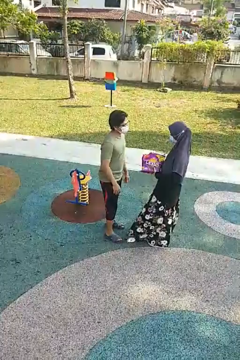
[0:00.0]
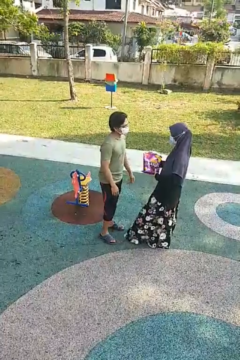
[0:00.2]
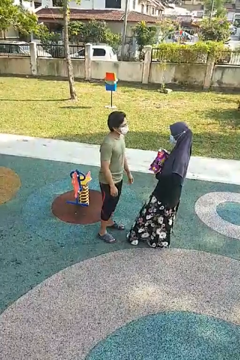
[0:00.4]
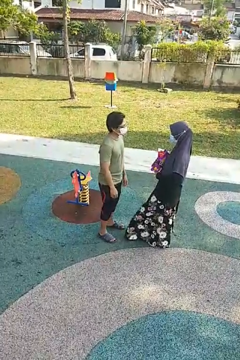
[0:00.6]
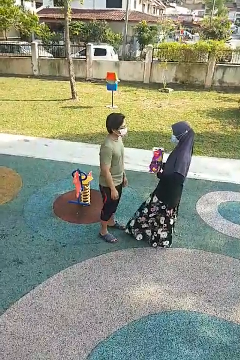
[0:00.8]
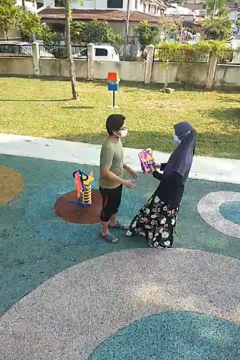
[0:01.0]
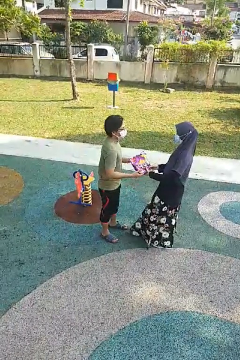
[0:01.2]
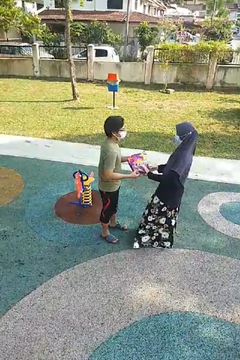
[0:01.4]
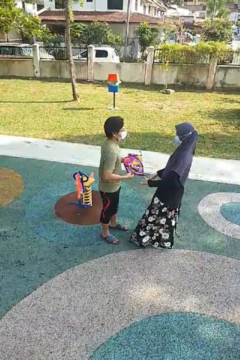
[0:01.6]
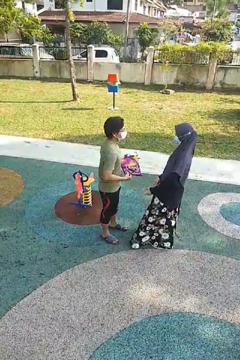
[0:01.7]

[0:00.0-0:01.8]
person transfers object to person

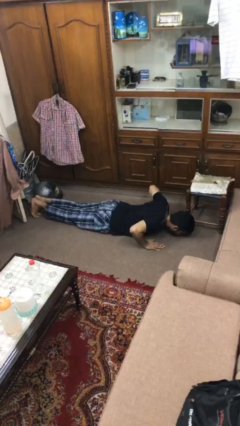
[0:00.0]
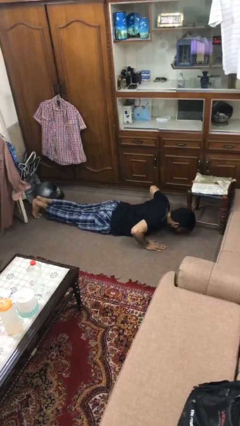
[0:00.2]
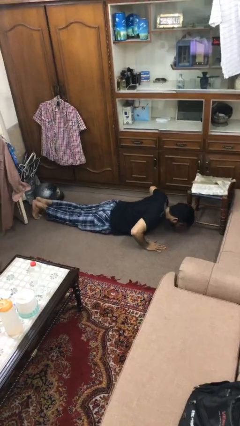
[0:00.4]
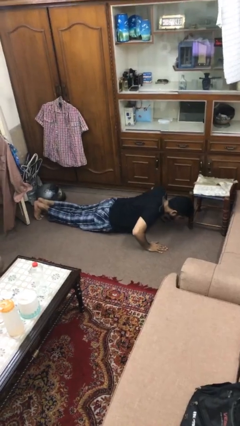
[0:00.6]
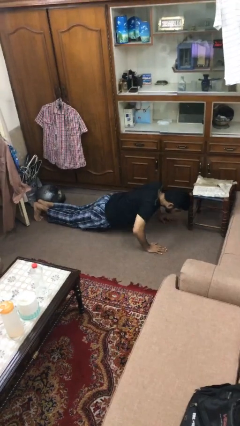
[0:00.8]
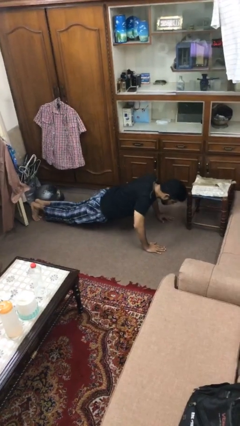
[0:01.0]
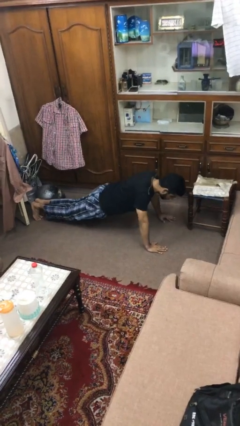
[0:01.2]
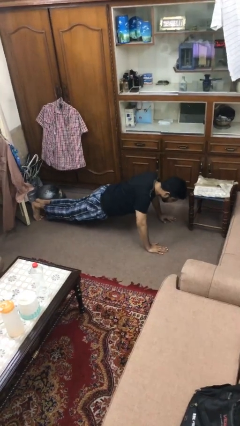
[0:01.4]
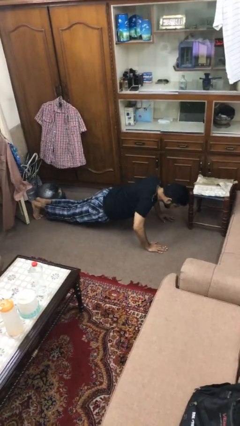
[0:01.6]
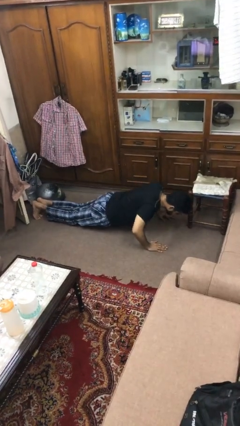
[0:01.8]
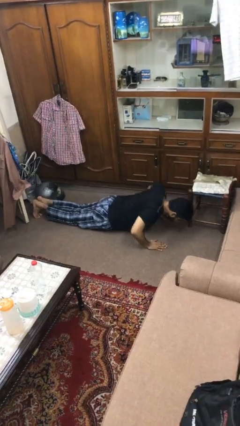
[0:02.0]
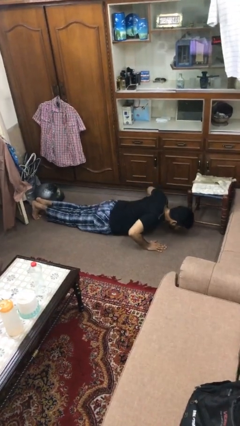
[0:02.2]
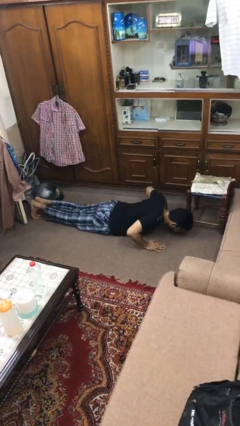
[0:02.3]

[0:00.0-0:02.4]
person exercises with pushup

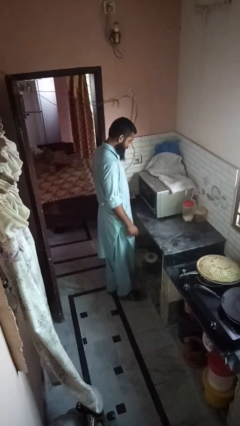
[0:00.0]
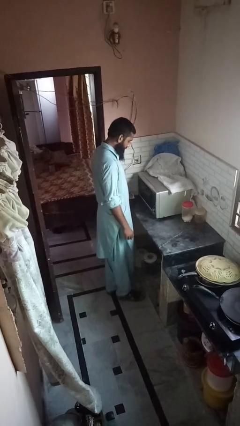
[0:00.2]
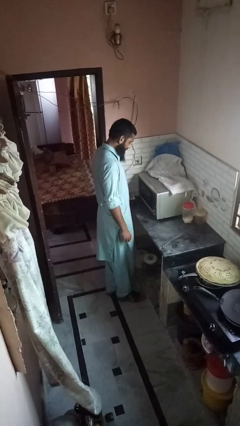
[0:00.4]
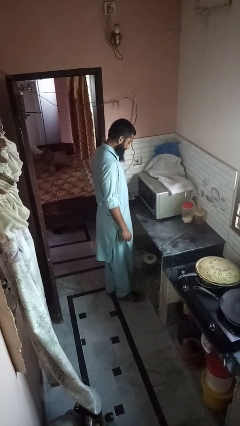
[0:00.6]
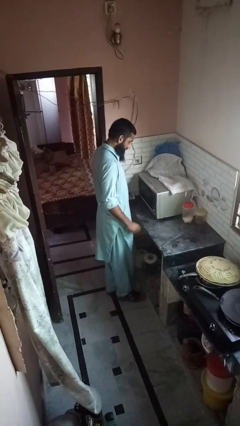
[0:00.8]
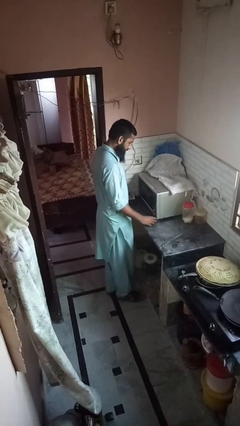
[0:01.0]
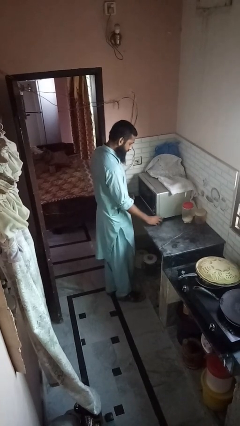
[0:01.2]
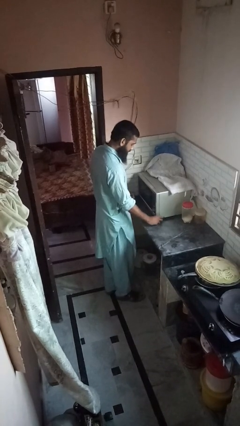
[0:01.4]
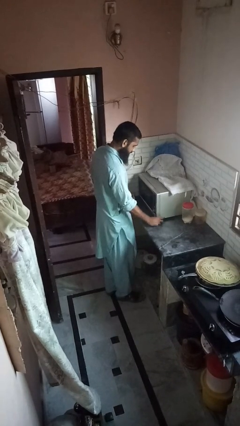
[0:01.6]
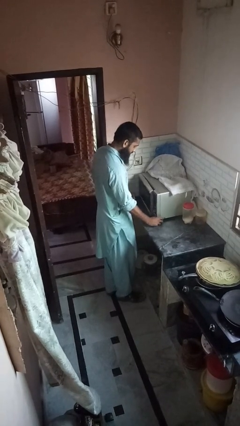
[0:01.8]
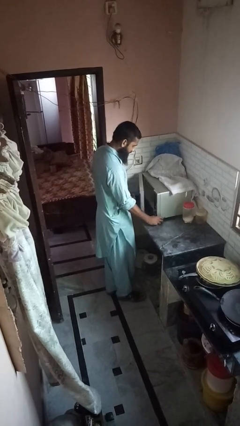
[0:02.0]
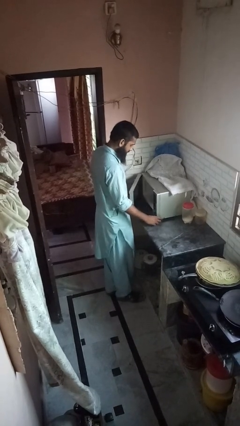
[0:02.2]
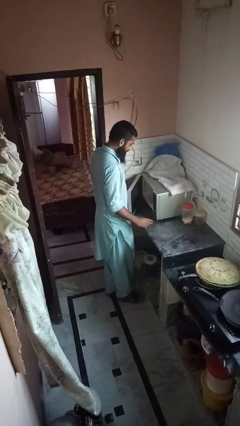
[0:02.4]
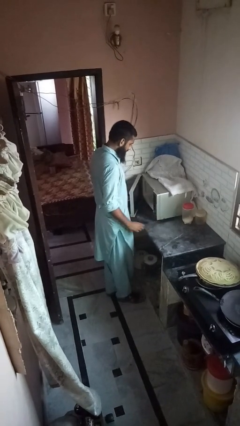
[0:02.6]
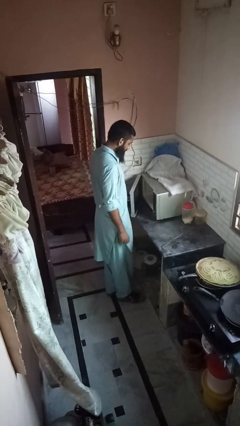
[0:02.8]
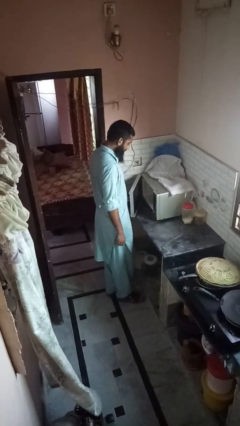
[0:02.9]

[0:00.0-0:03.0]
person opens microwave

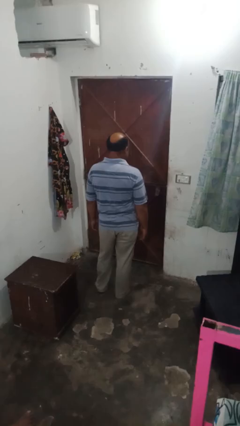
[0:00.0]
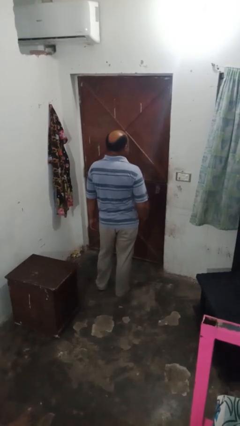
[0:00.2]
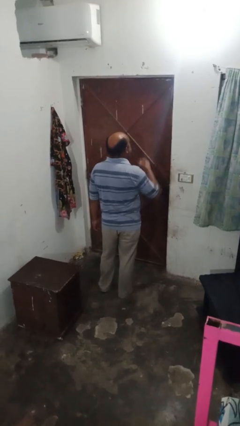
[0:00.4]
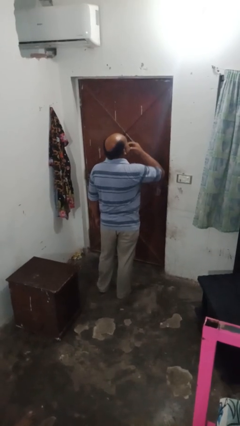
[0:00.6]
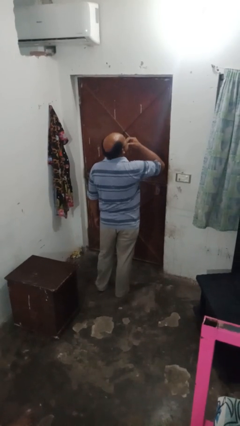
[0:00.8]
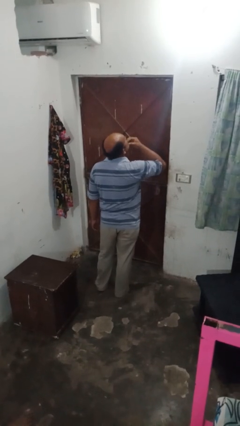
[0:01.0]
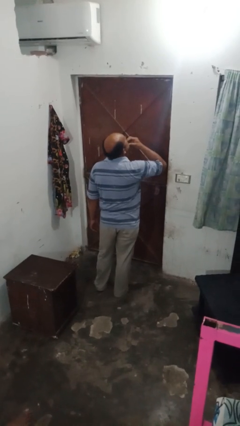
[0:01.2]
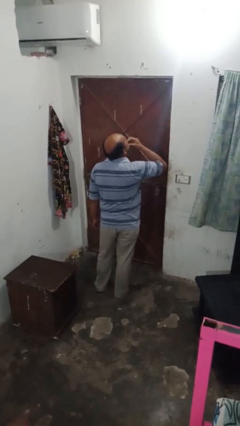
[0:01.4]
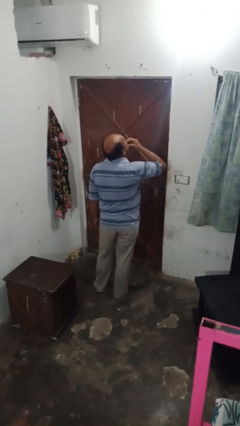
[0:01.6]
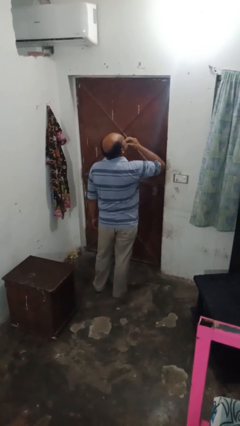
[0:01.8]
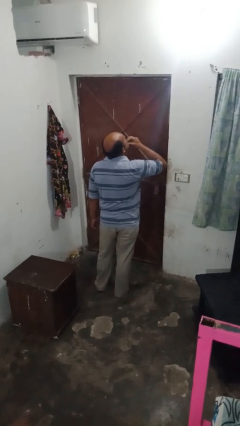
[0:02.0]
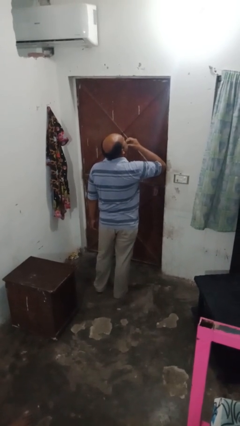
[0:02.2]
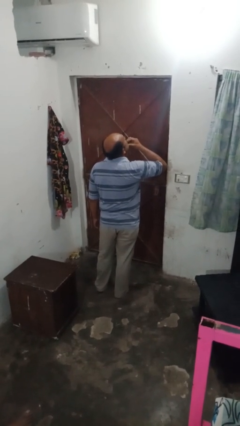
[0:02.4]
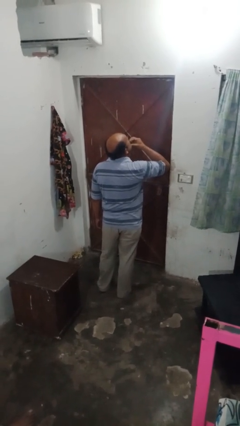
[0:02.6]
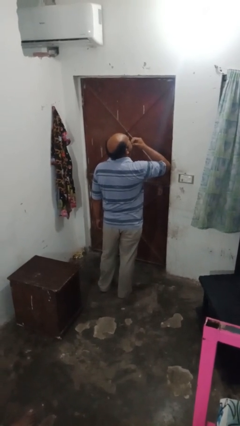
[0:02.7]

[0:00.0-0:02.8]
person strokes chin

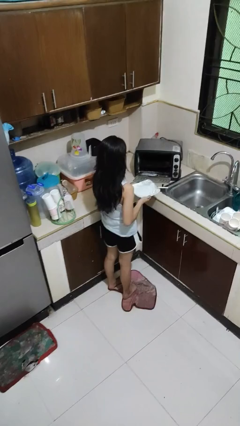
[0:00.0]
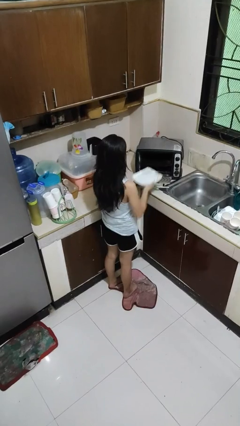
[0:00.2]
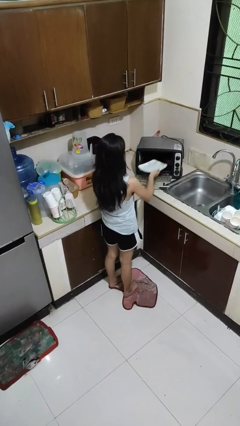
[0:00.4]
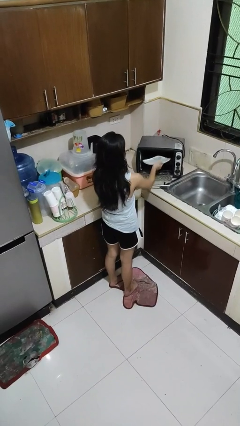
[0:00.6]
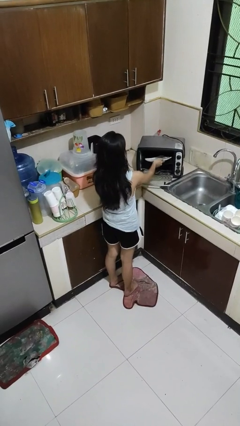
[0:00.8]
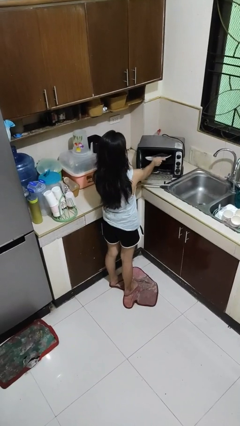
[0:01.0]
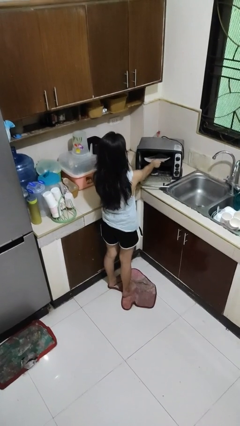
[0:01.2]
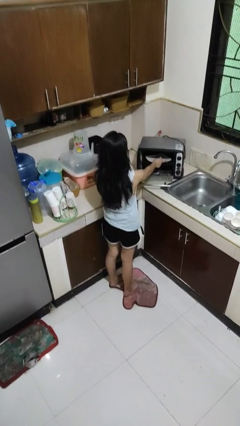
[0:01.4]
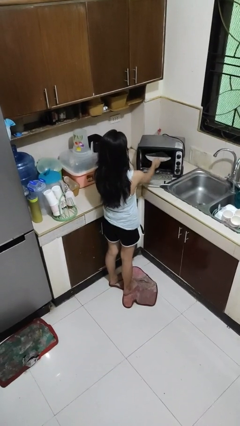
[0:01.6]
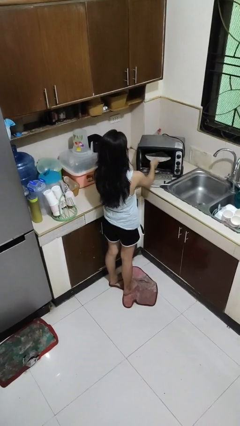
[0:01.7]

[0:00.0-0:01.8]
person puts object into microwave

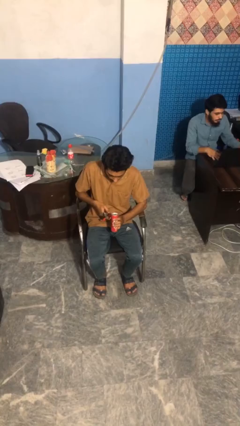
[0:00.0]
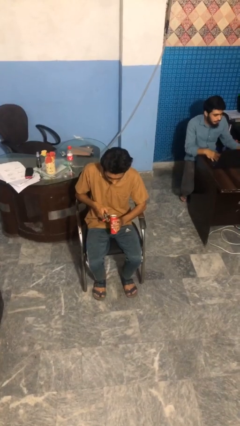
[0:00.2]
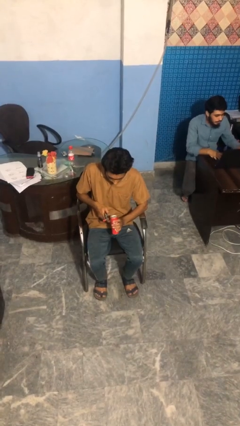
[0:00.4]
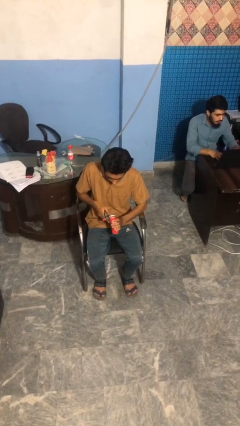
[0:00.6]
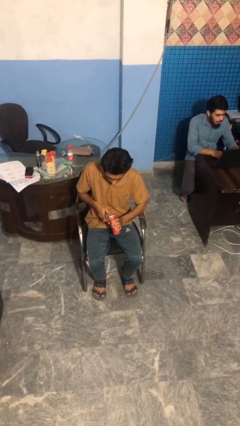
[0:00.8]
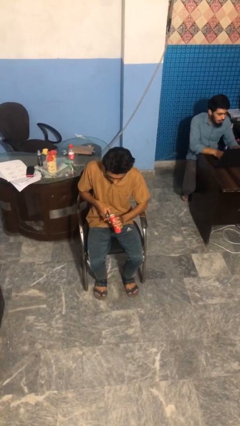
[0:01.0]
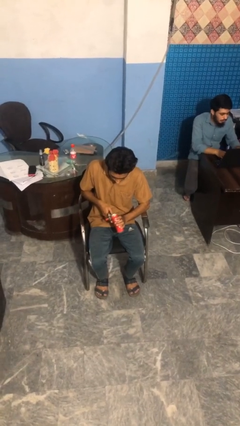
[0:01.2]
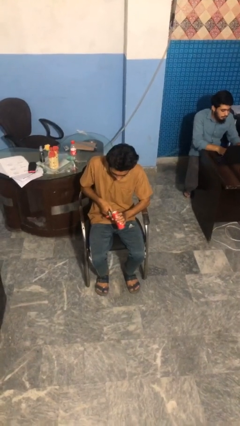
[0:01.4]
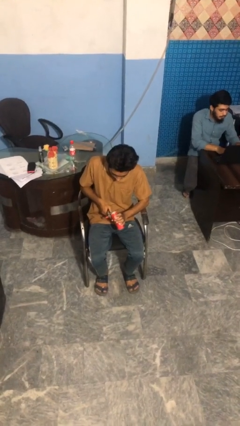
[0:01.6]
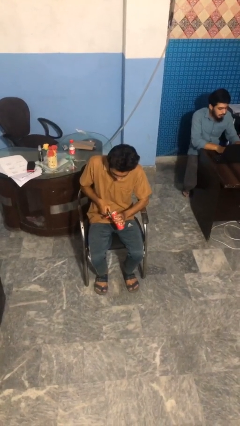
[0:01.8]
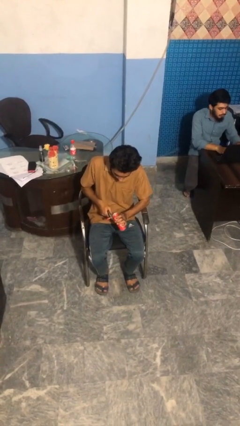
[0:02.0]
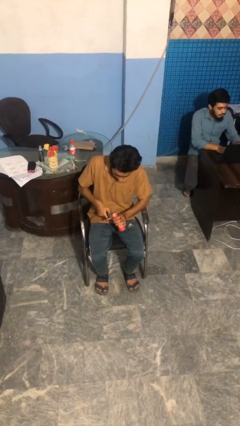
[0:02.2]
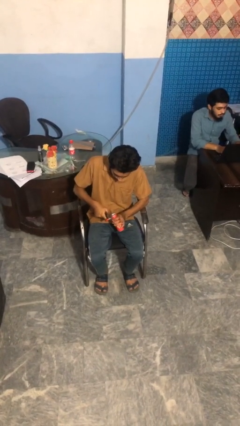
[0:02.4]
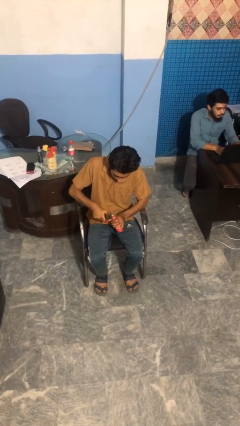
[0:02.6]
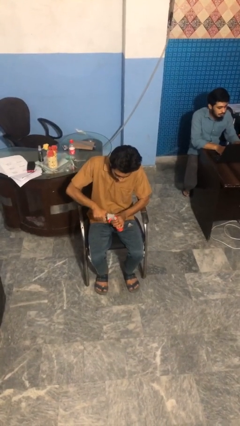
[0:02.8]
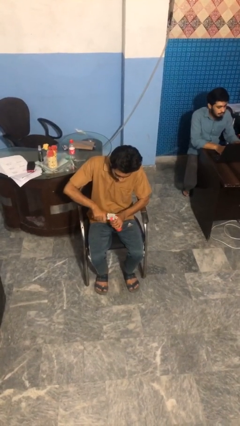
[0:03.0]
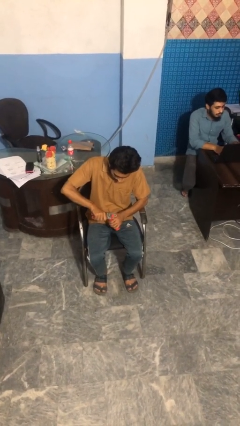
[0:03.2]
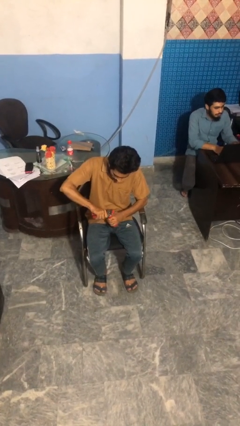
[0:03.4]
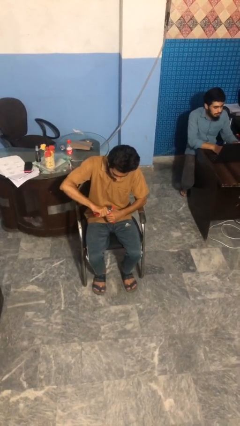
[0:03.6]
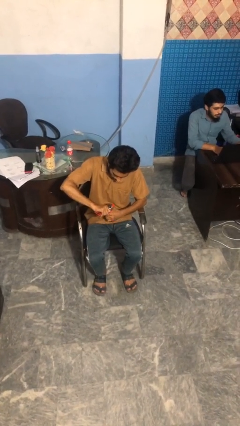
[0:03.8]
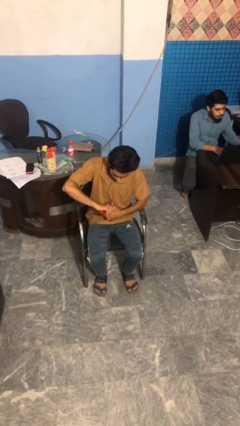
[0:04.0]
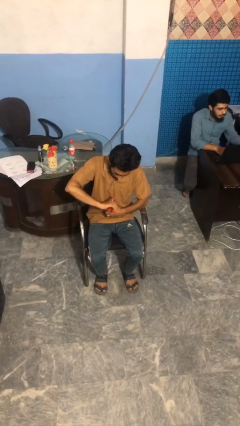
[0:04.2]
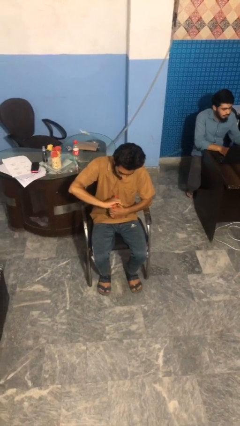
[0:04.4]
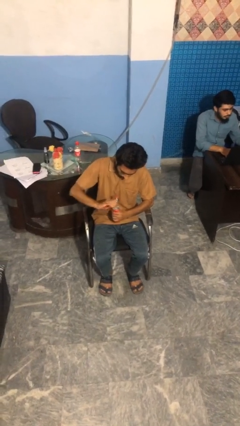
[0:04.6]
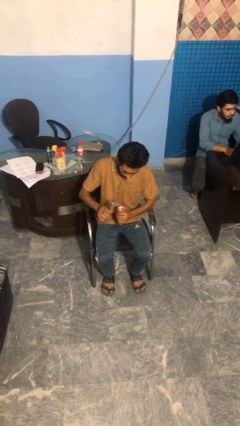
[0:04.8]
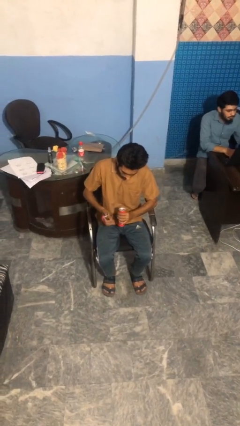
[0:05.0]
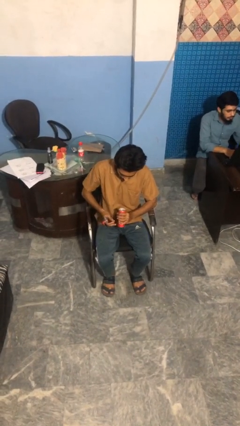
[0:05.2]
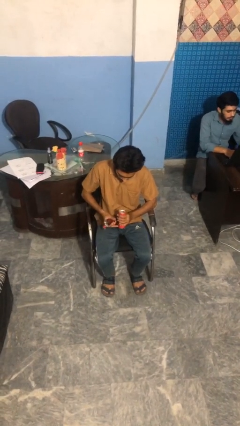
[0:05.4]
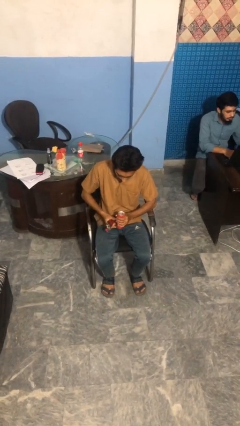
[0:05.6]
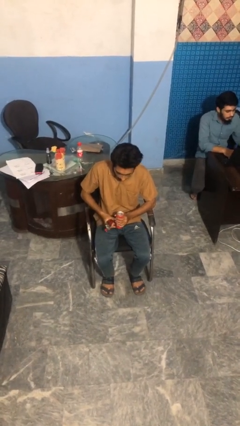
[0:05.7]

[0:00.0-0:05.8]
person opens can with can opener

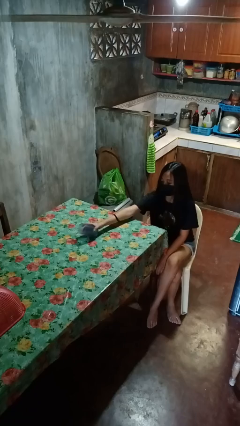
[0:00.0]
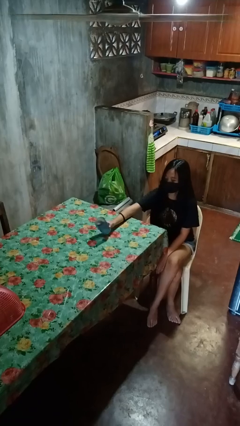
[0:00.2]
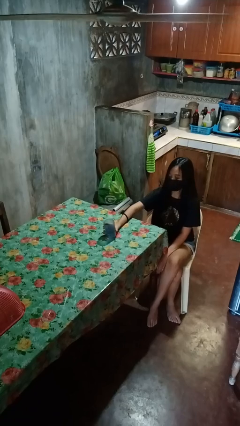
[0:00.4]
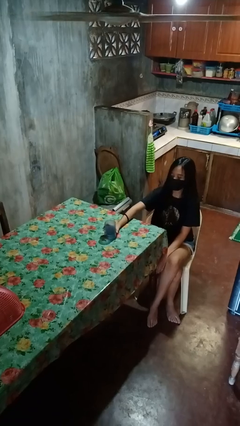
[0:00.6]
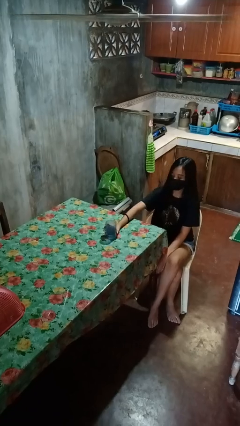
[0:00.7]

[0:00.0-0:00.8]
person sets upright glass
